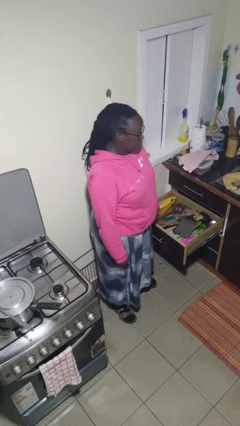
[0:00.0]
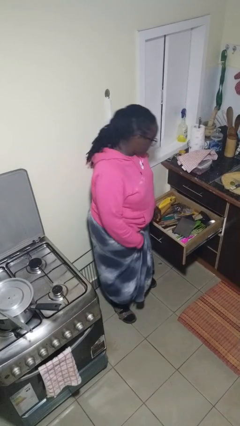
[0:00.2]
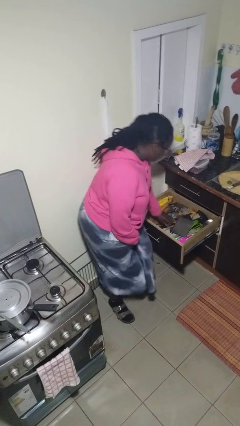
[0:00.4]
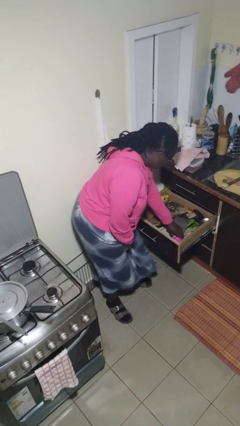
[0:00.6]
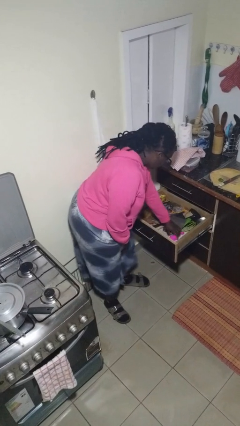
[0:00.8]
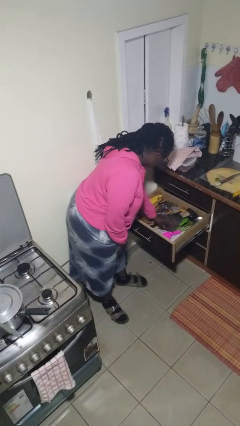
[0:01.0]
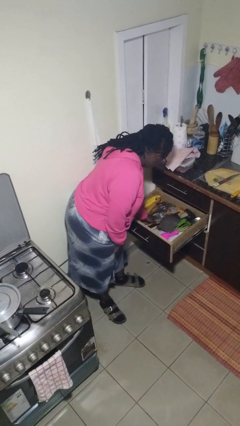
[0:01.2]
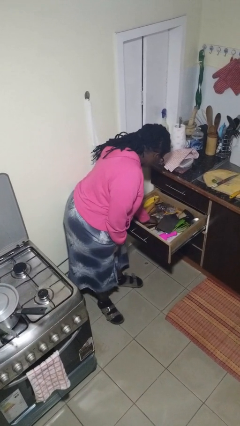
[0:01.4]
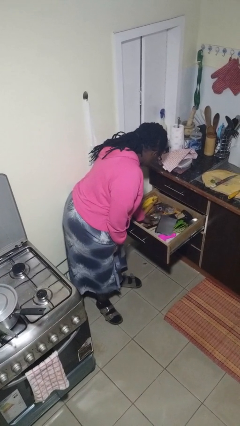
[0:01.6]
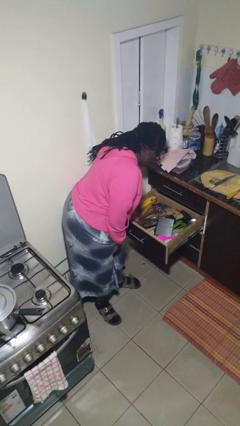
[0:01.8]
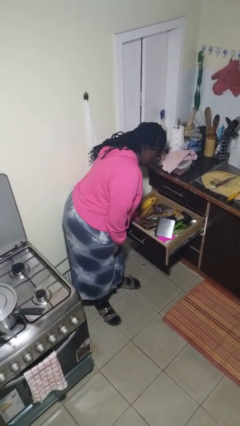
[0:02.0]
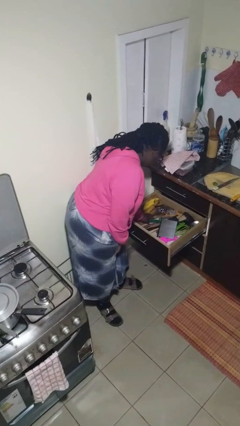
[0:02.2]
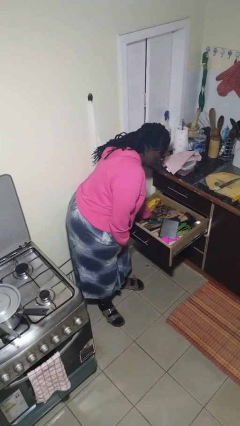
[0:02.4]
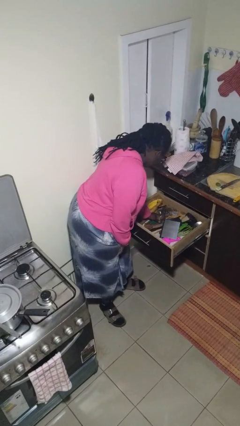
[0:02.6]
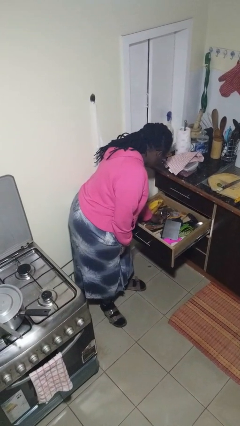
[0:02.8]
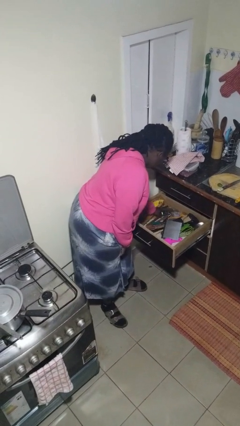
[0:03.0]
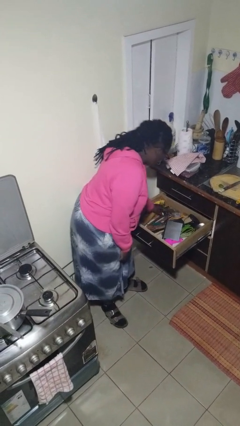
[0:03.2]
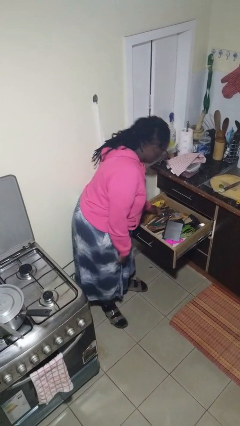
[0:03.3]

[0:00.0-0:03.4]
person searches in kitchen drawer

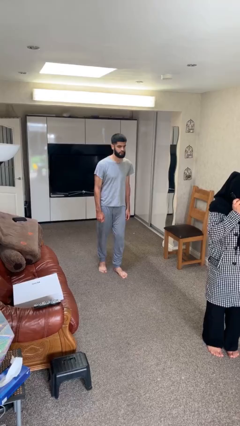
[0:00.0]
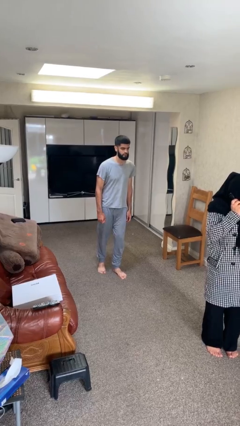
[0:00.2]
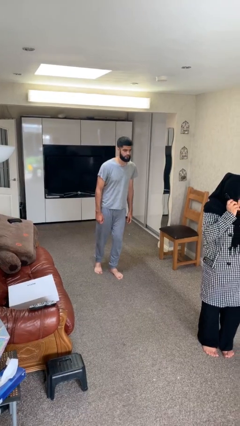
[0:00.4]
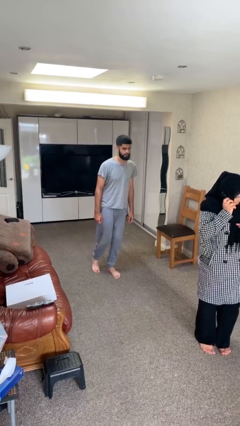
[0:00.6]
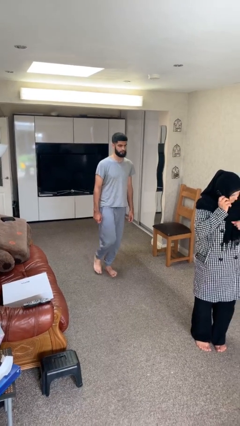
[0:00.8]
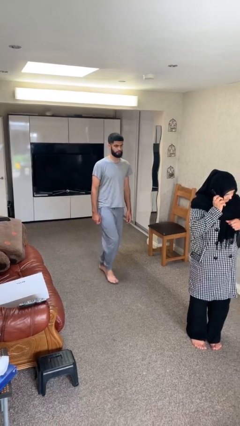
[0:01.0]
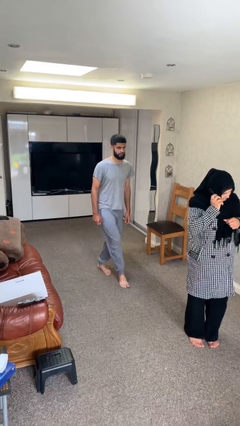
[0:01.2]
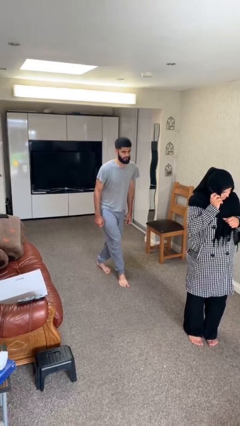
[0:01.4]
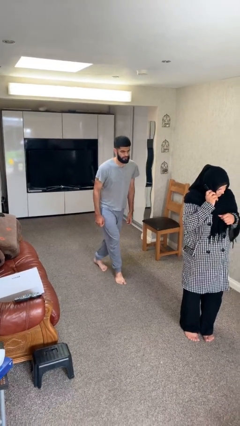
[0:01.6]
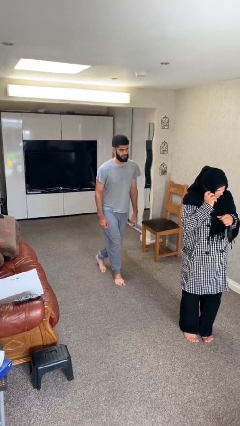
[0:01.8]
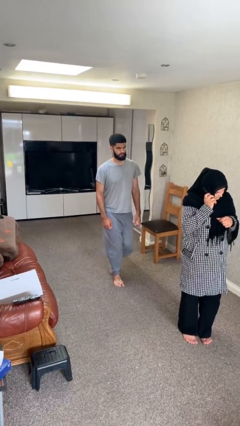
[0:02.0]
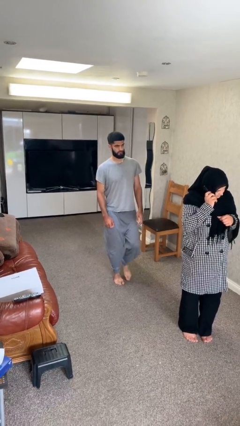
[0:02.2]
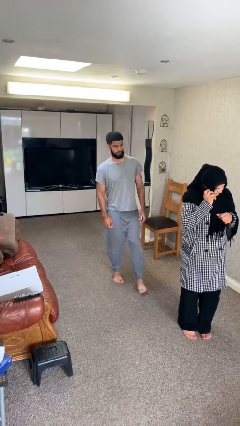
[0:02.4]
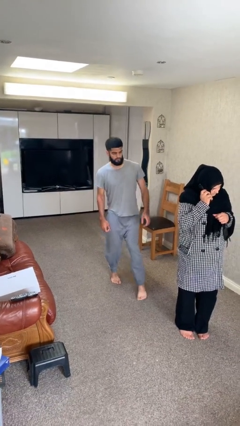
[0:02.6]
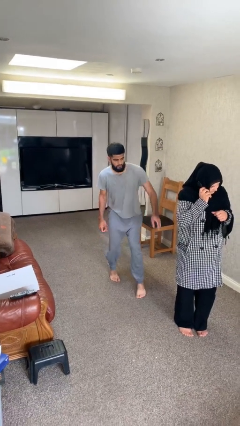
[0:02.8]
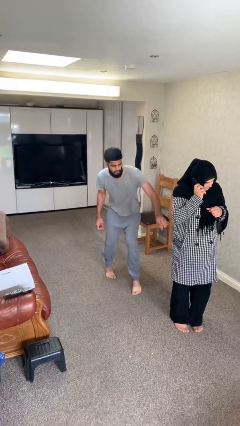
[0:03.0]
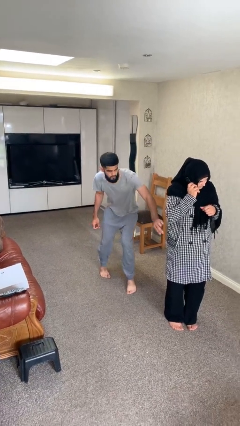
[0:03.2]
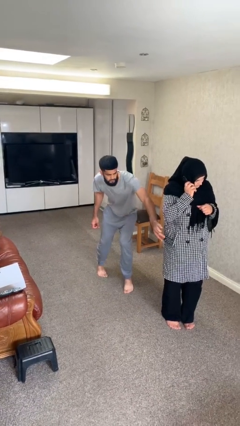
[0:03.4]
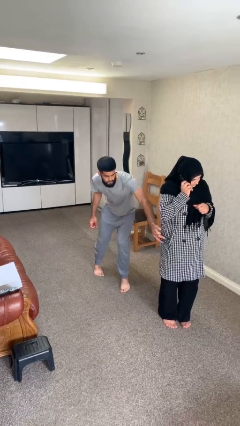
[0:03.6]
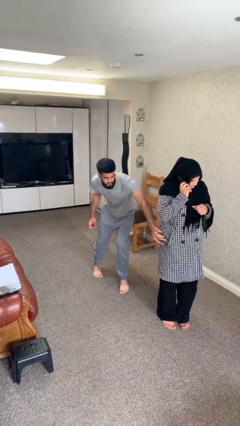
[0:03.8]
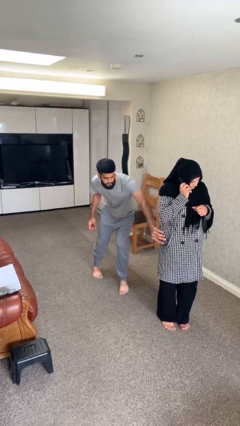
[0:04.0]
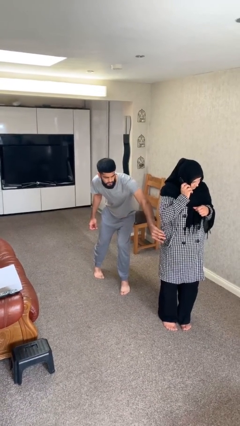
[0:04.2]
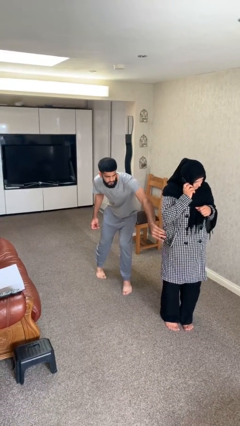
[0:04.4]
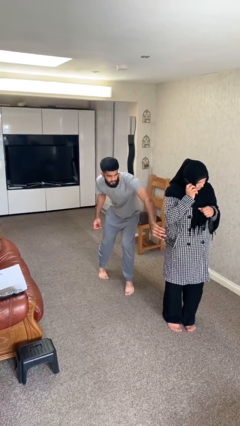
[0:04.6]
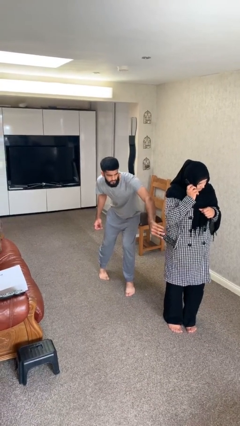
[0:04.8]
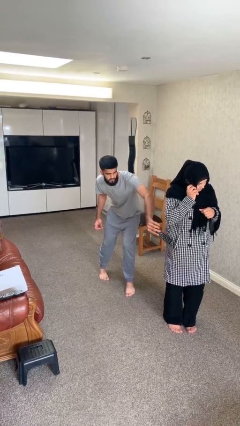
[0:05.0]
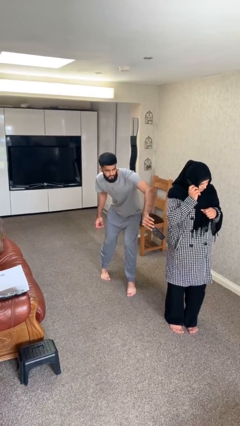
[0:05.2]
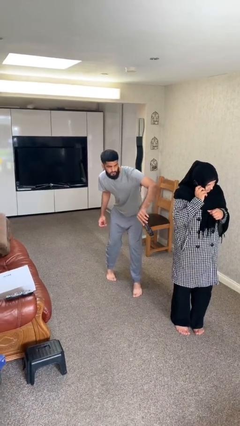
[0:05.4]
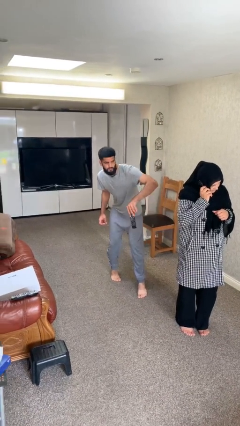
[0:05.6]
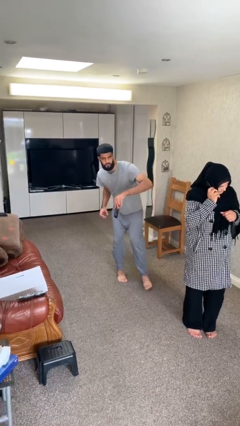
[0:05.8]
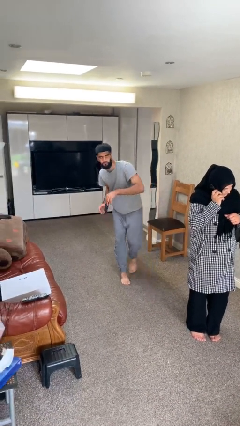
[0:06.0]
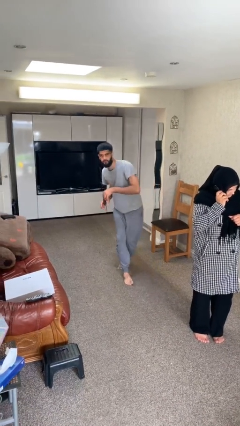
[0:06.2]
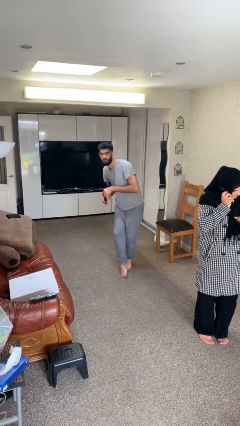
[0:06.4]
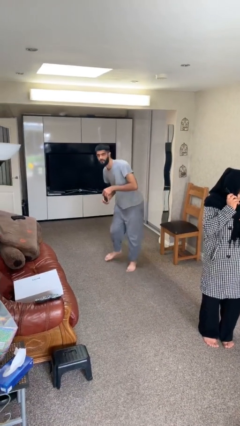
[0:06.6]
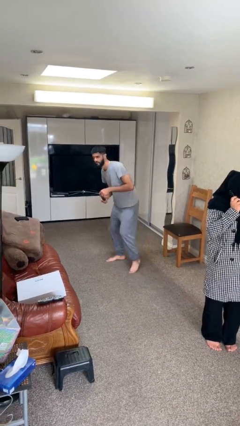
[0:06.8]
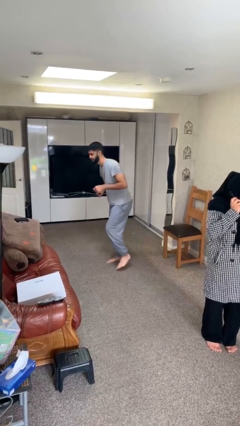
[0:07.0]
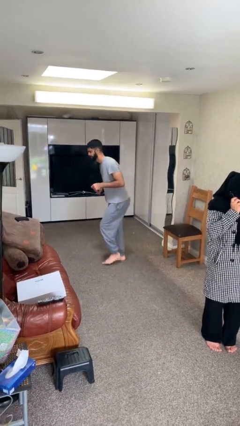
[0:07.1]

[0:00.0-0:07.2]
person steals object from person

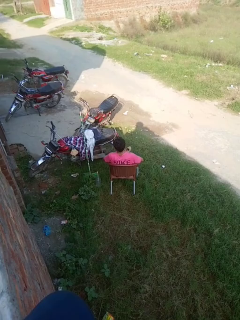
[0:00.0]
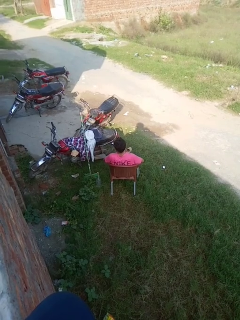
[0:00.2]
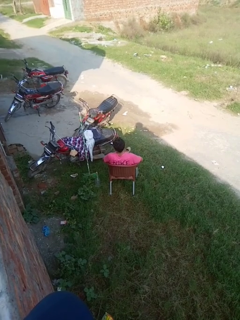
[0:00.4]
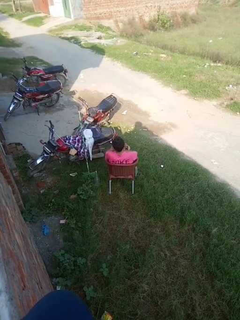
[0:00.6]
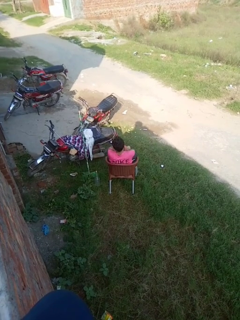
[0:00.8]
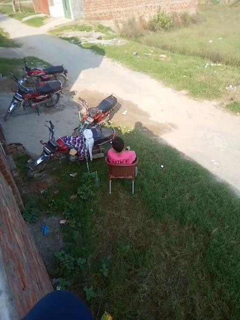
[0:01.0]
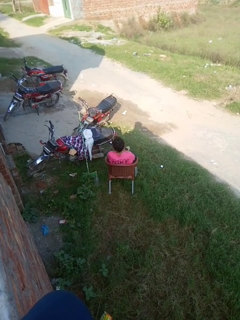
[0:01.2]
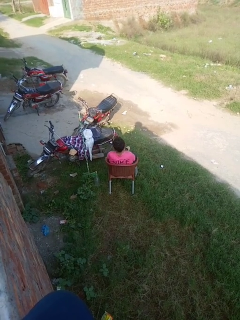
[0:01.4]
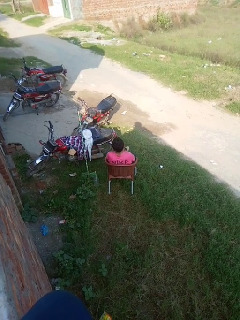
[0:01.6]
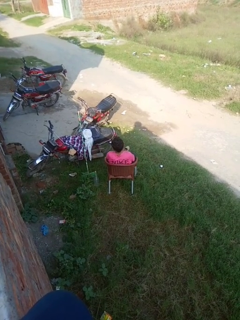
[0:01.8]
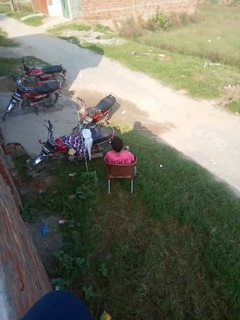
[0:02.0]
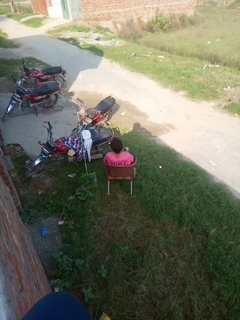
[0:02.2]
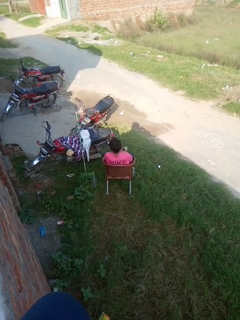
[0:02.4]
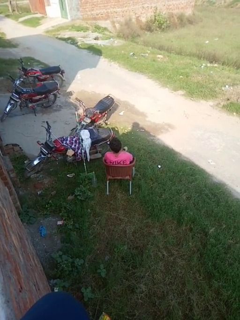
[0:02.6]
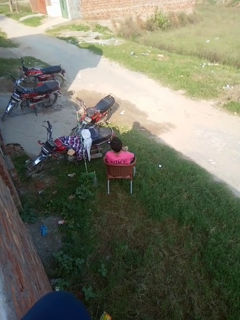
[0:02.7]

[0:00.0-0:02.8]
person crosses arms

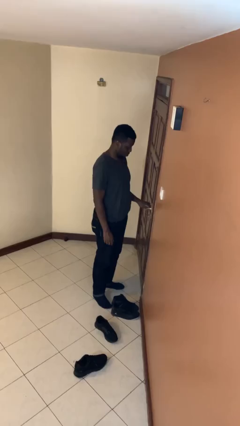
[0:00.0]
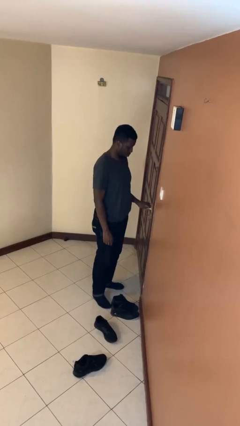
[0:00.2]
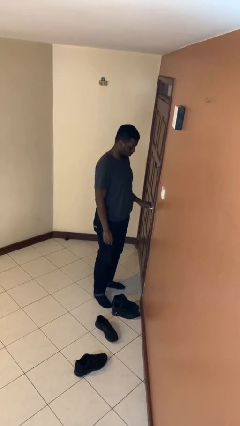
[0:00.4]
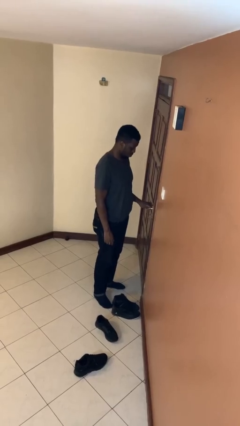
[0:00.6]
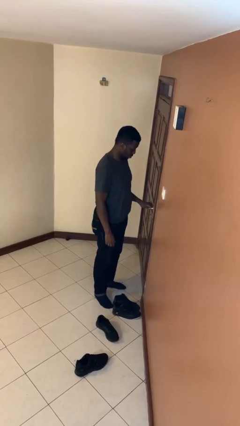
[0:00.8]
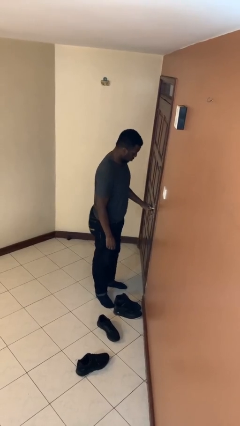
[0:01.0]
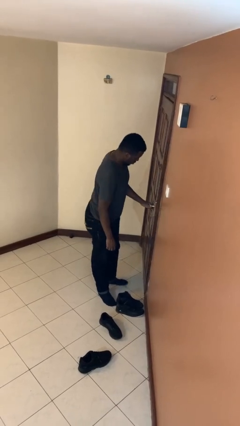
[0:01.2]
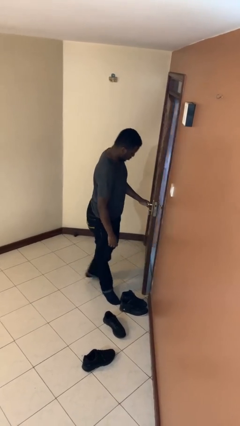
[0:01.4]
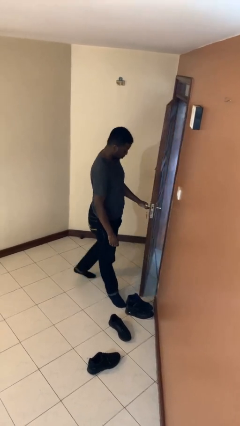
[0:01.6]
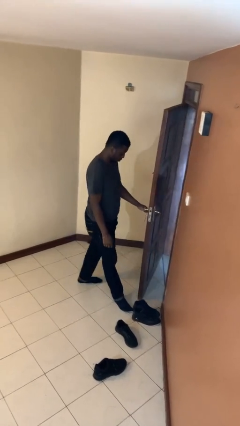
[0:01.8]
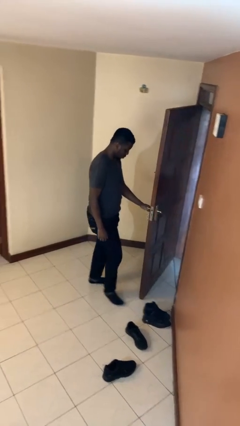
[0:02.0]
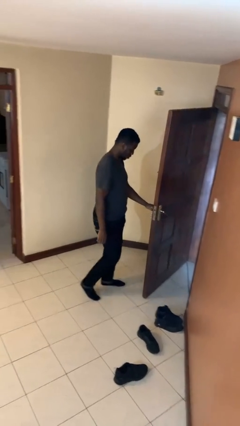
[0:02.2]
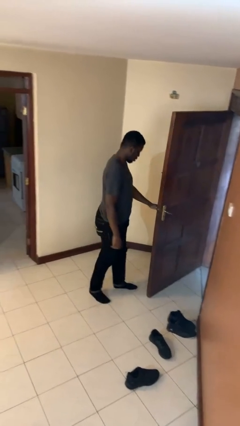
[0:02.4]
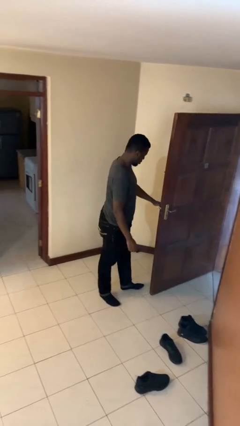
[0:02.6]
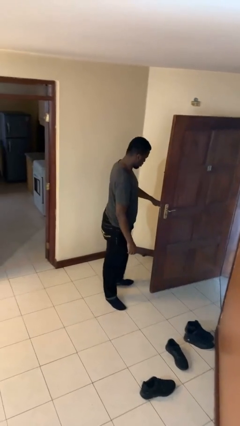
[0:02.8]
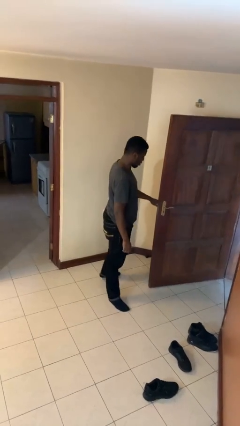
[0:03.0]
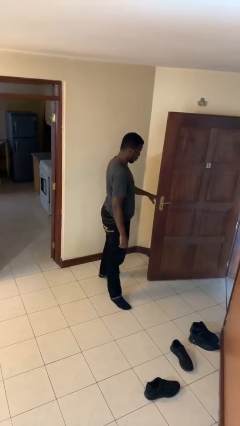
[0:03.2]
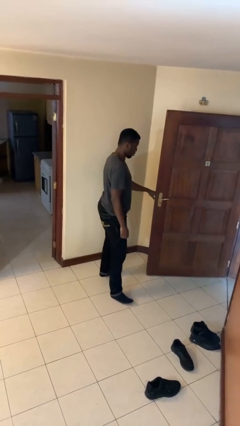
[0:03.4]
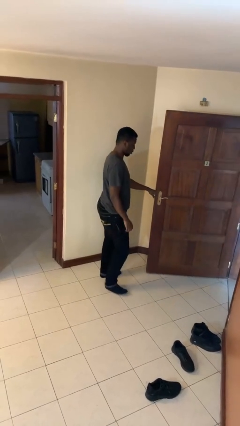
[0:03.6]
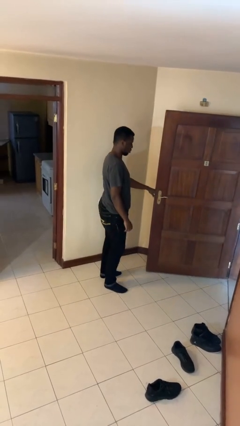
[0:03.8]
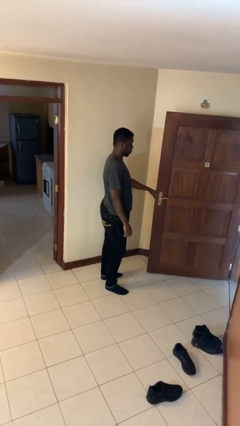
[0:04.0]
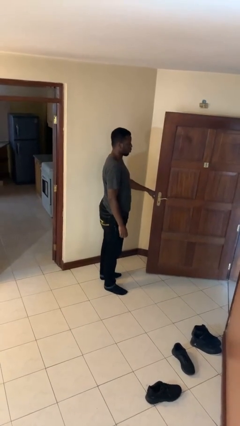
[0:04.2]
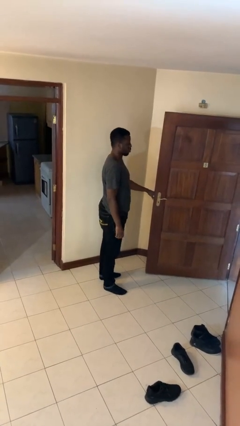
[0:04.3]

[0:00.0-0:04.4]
person opens facility door

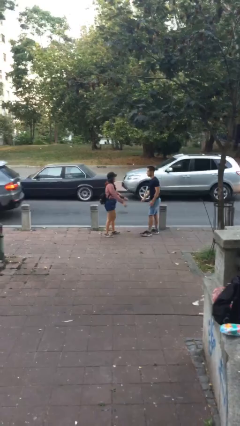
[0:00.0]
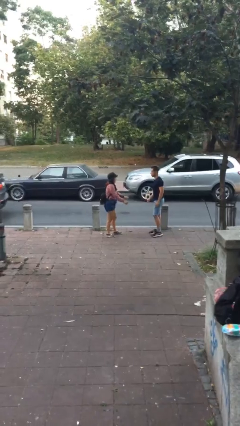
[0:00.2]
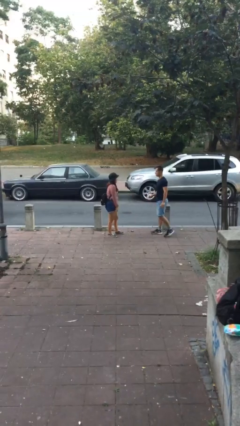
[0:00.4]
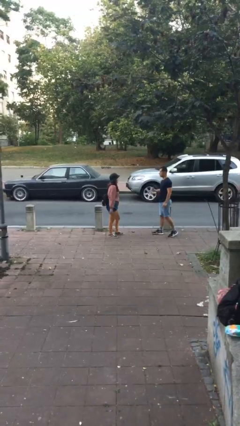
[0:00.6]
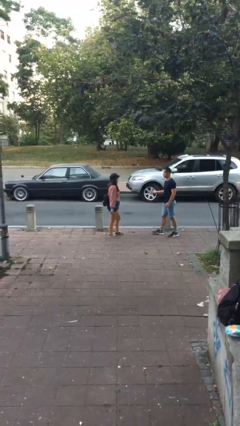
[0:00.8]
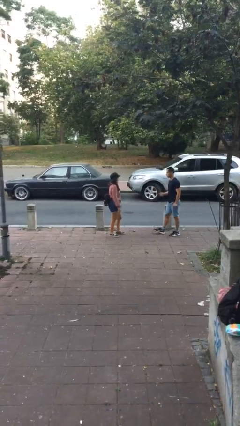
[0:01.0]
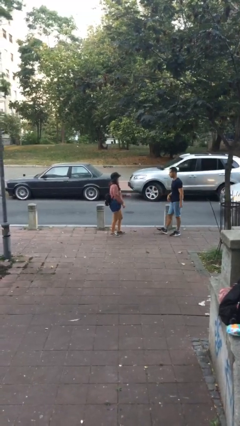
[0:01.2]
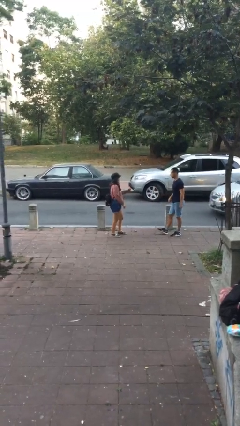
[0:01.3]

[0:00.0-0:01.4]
person talks to person
